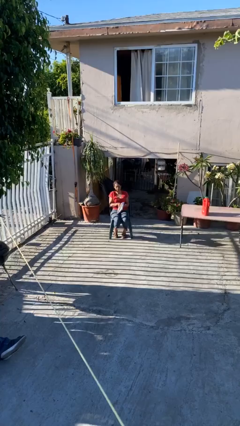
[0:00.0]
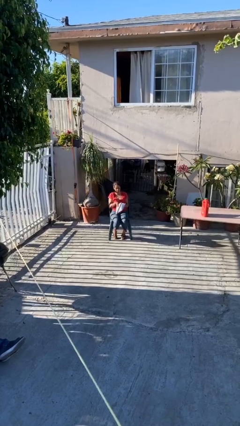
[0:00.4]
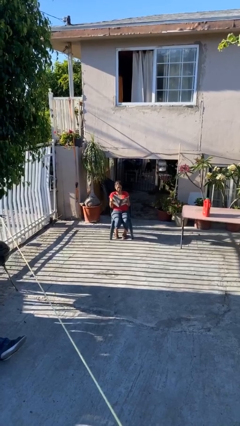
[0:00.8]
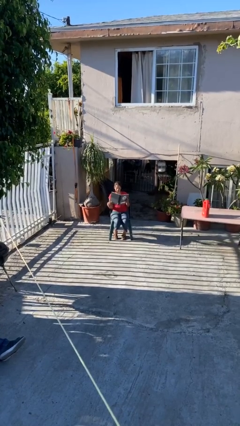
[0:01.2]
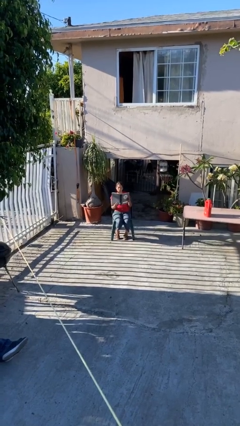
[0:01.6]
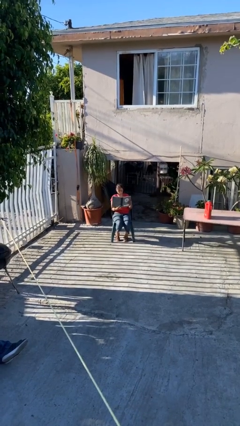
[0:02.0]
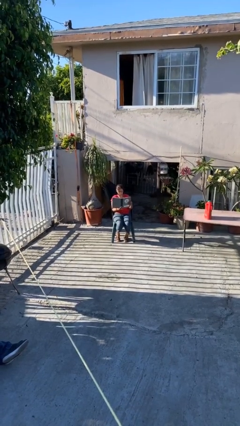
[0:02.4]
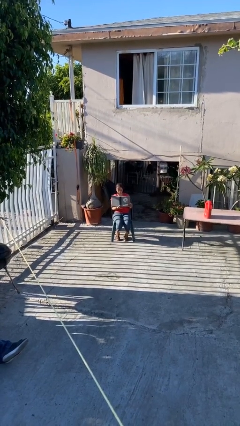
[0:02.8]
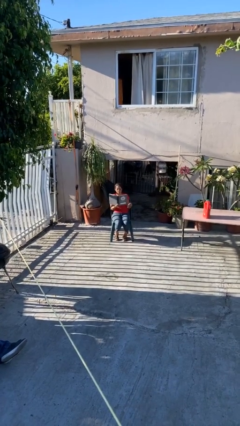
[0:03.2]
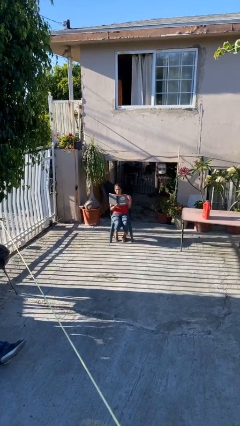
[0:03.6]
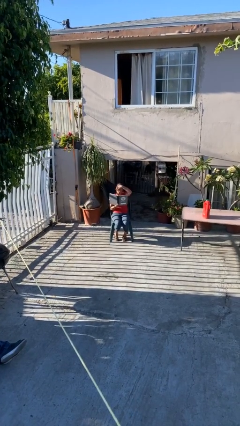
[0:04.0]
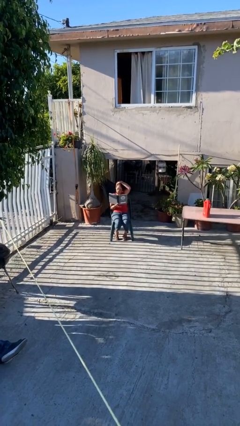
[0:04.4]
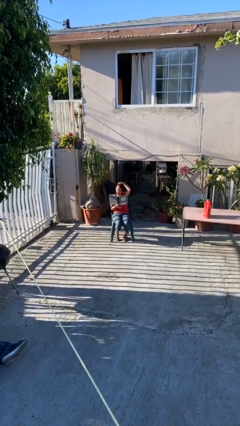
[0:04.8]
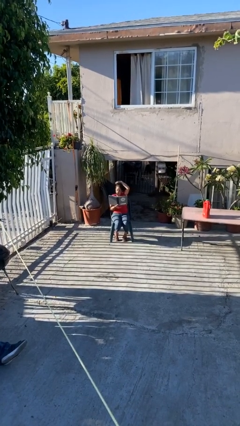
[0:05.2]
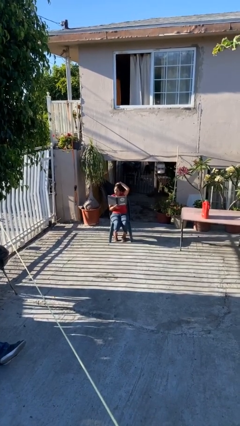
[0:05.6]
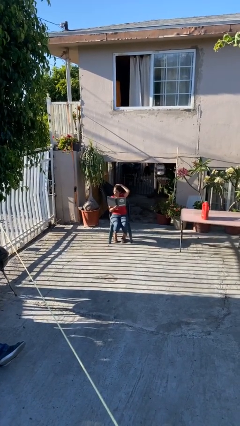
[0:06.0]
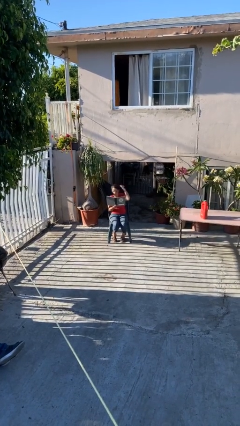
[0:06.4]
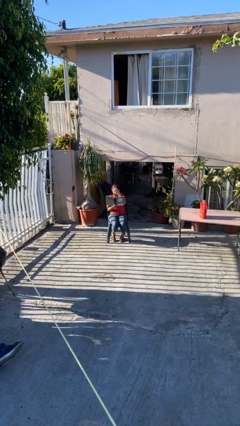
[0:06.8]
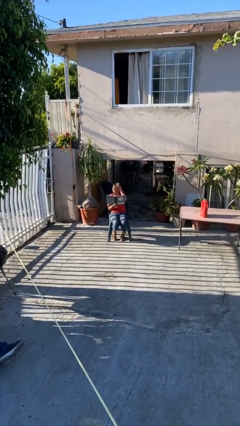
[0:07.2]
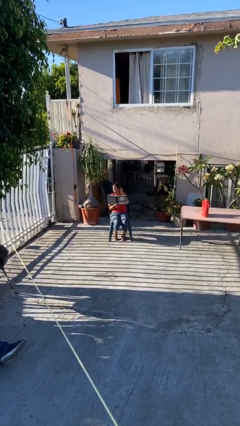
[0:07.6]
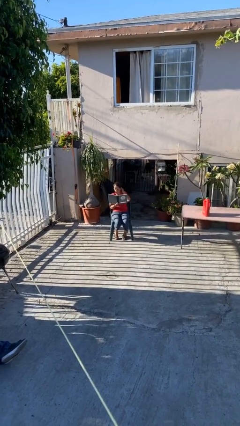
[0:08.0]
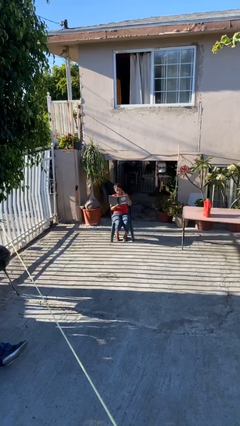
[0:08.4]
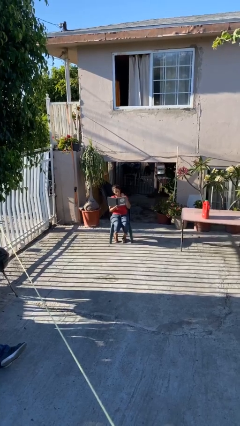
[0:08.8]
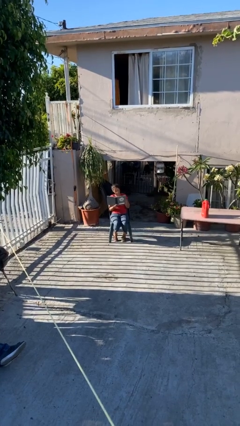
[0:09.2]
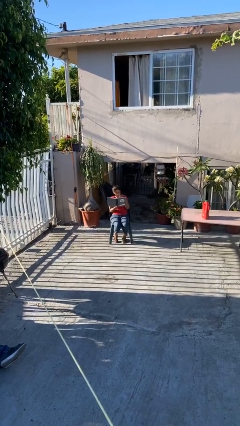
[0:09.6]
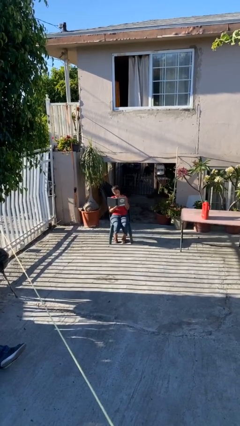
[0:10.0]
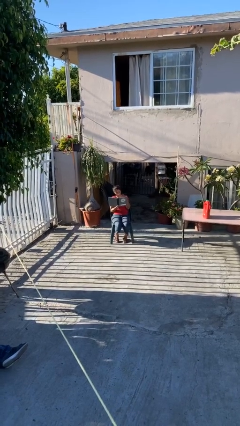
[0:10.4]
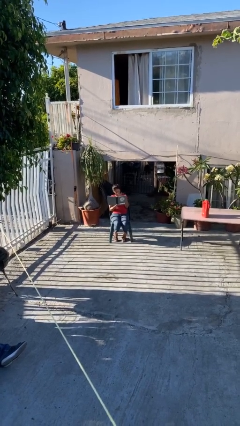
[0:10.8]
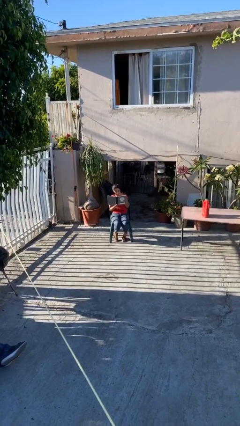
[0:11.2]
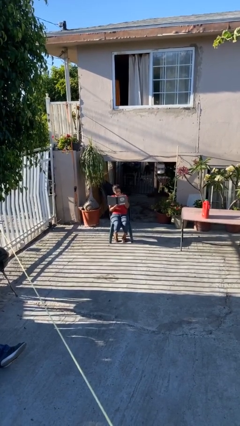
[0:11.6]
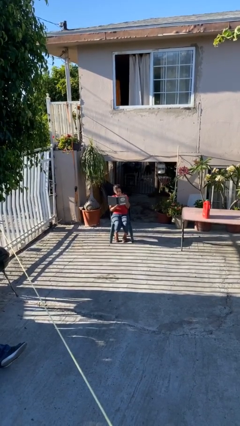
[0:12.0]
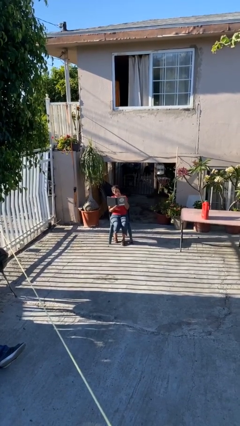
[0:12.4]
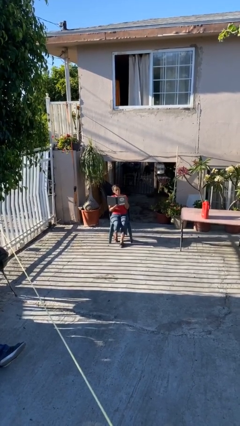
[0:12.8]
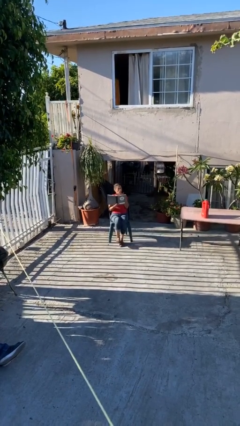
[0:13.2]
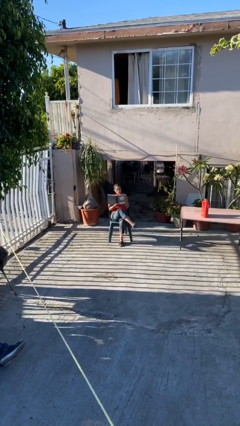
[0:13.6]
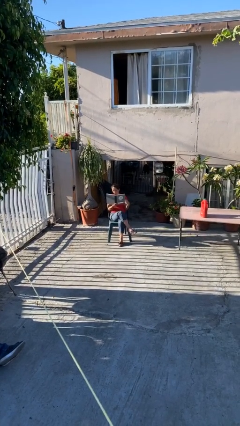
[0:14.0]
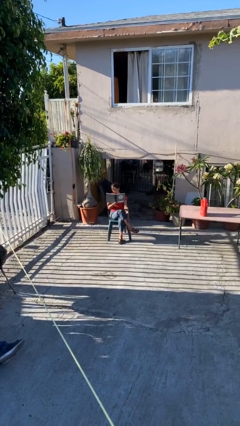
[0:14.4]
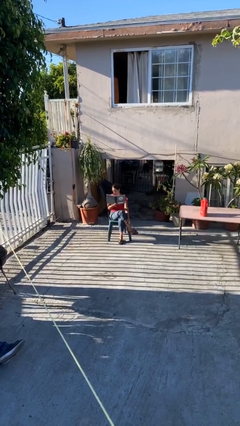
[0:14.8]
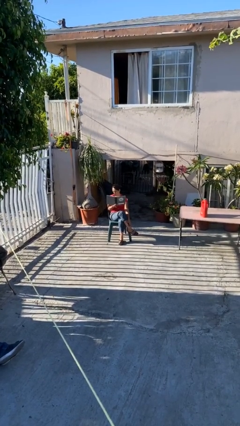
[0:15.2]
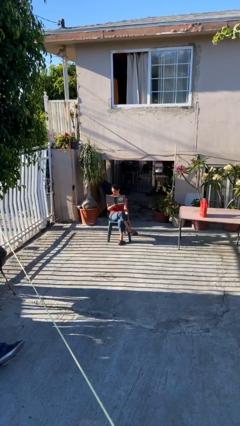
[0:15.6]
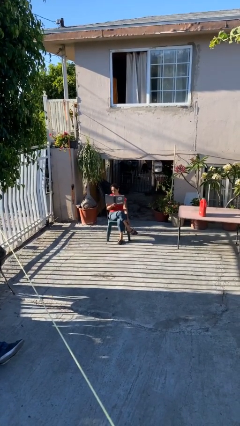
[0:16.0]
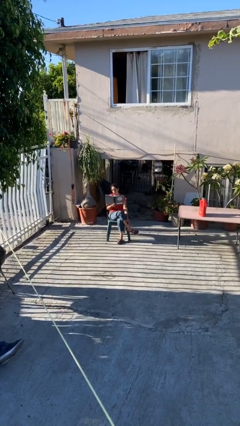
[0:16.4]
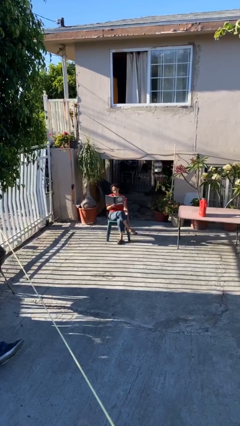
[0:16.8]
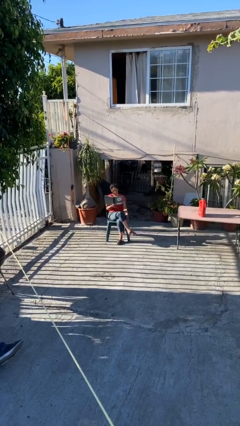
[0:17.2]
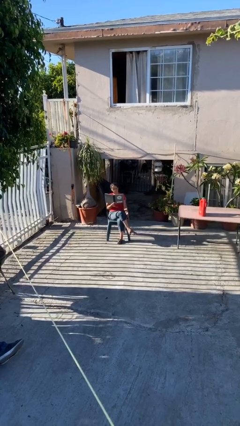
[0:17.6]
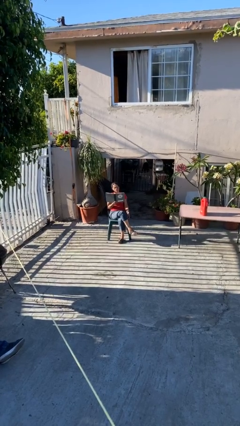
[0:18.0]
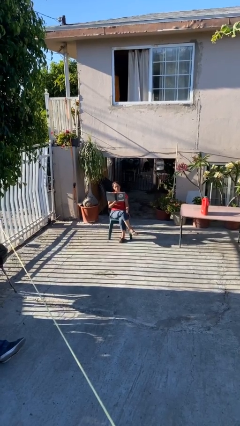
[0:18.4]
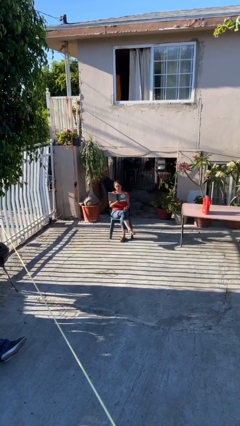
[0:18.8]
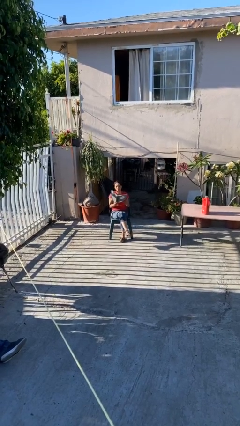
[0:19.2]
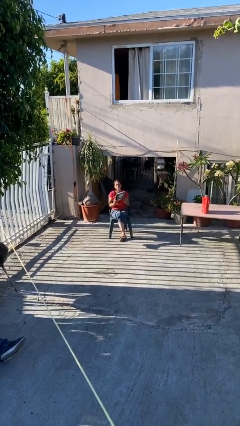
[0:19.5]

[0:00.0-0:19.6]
person reads document

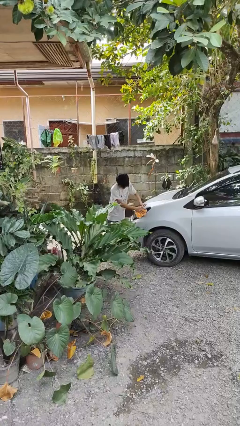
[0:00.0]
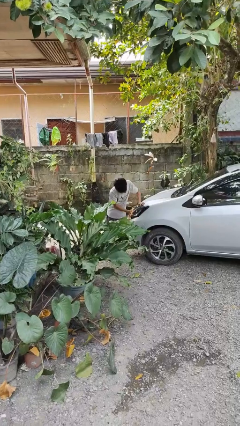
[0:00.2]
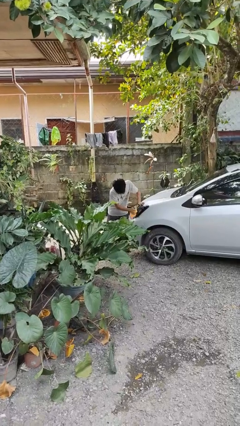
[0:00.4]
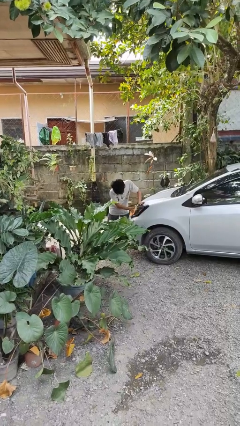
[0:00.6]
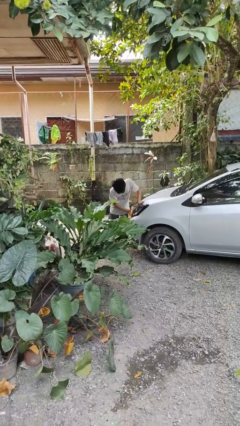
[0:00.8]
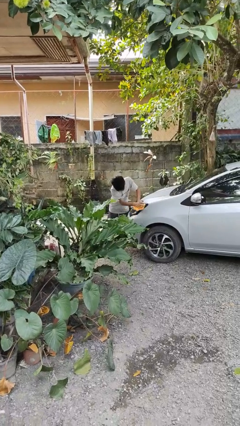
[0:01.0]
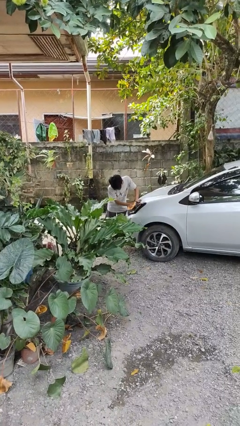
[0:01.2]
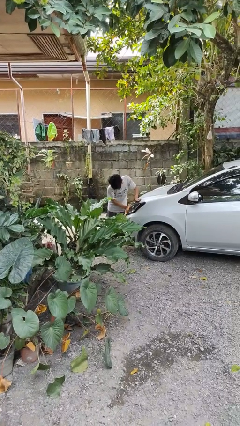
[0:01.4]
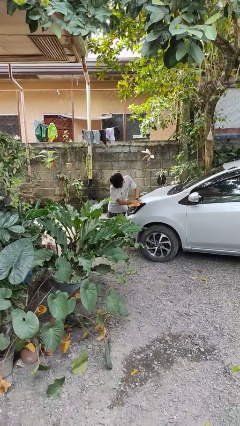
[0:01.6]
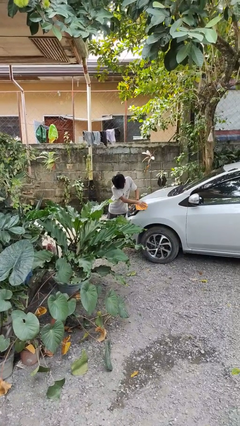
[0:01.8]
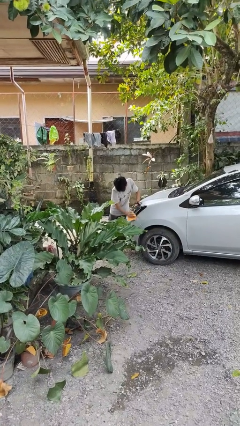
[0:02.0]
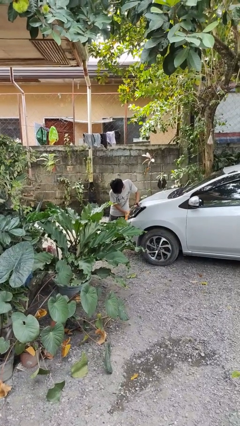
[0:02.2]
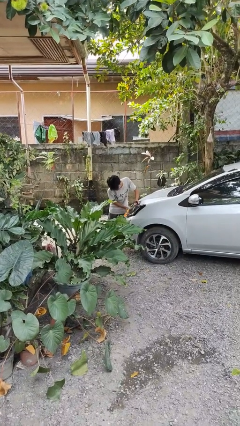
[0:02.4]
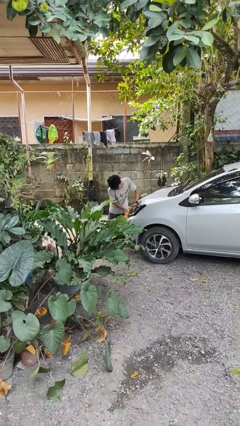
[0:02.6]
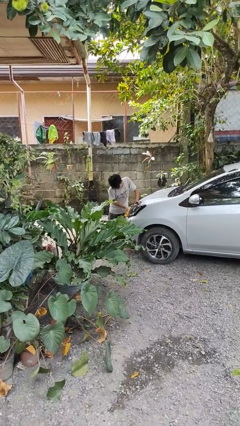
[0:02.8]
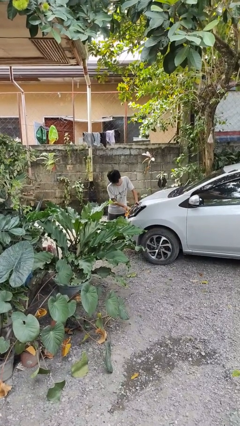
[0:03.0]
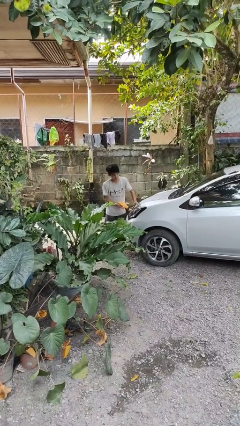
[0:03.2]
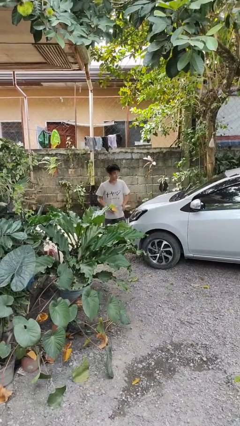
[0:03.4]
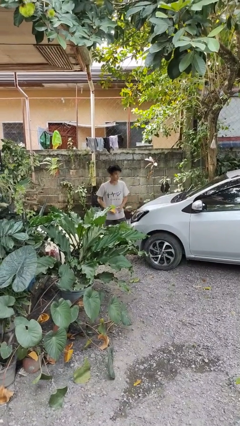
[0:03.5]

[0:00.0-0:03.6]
person polishes car with rag

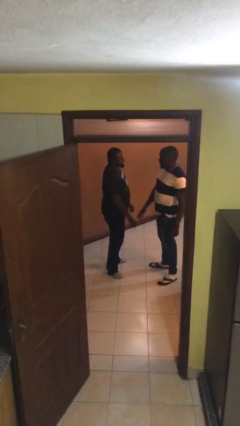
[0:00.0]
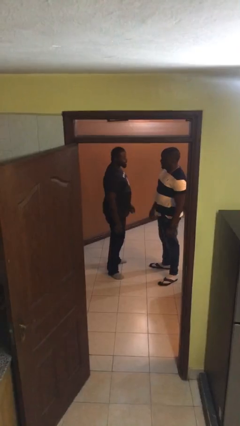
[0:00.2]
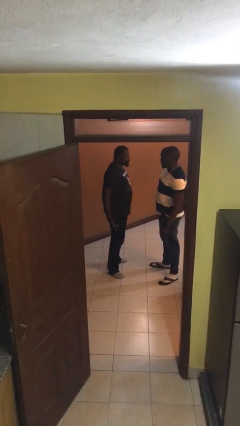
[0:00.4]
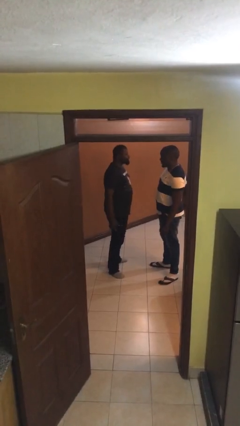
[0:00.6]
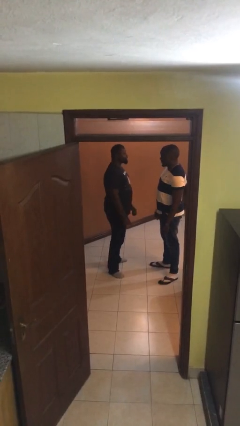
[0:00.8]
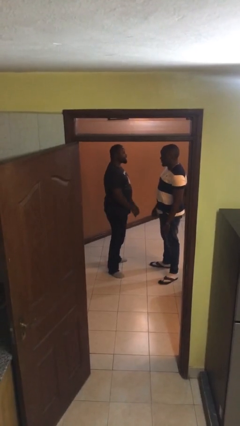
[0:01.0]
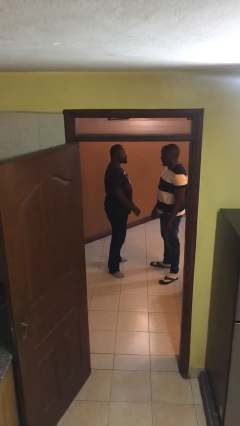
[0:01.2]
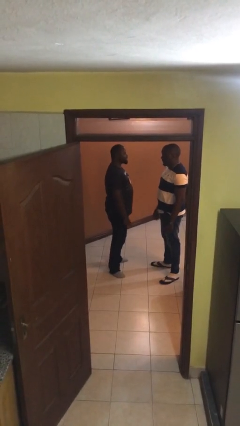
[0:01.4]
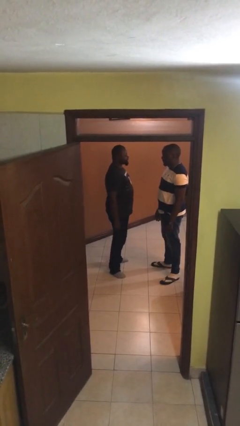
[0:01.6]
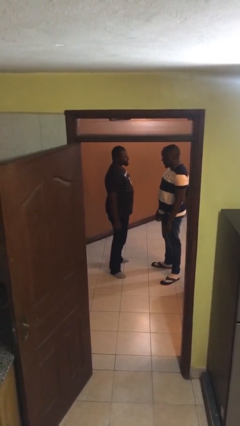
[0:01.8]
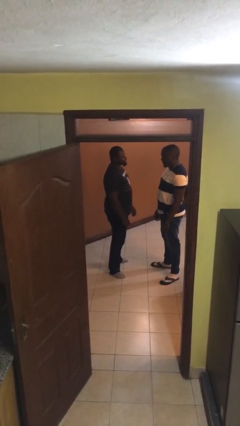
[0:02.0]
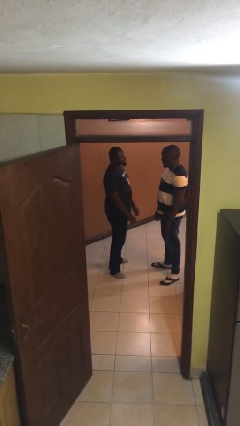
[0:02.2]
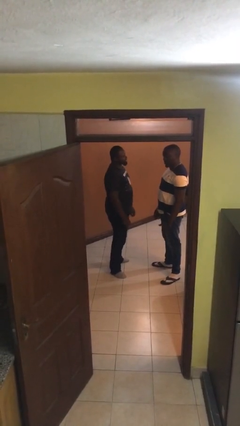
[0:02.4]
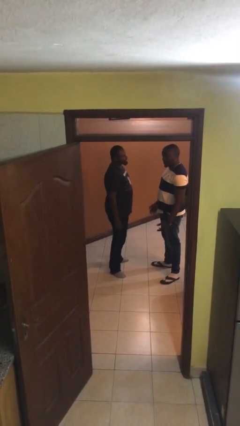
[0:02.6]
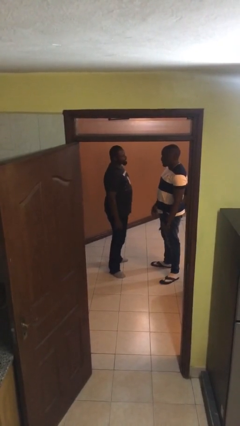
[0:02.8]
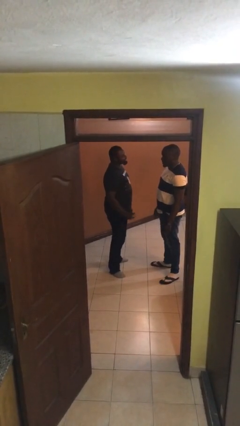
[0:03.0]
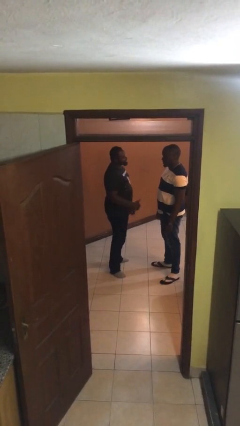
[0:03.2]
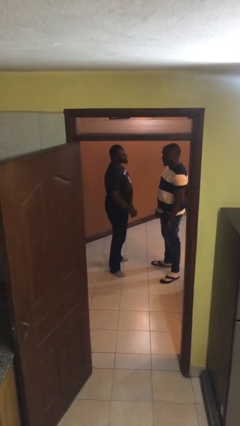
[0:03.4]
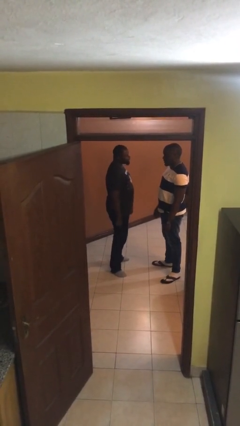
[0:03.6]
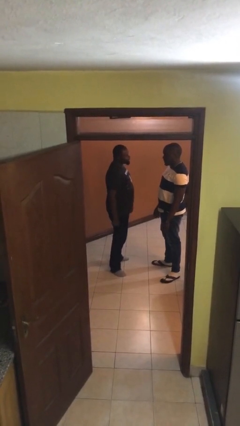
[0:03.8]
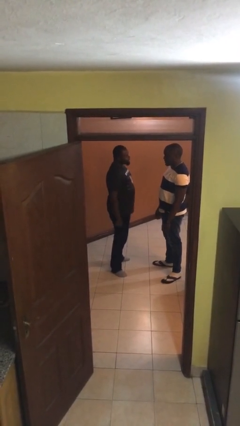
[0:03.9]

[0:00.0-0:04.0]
person talks to person

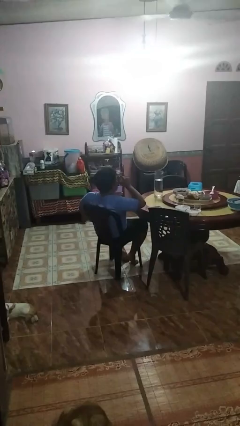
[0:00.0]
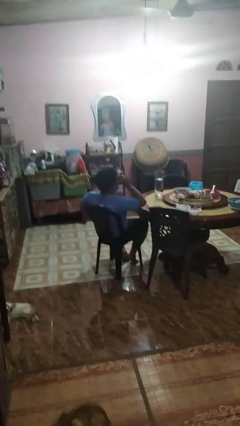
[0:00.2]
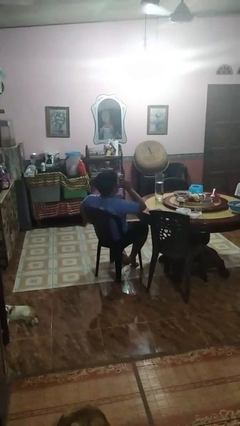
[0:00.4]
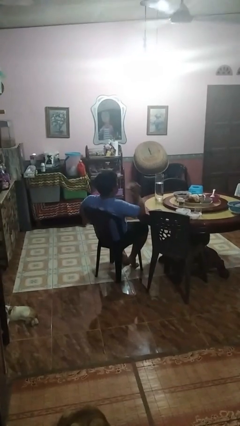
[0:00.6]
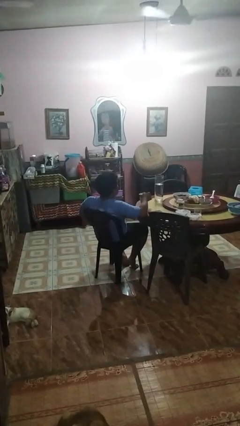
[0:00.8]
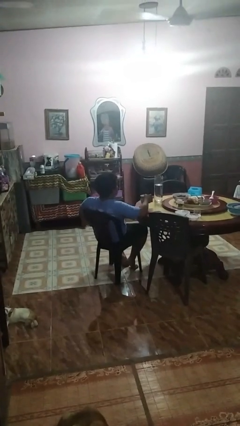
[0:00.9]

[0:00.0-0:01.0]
person drinks from mug
